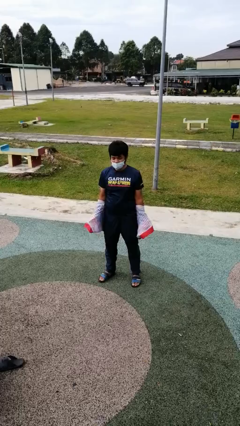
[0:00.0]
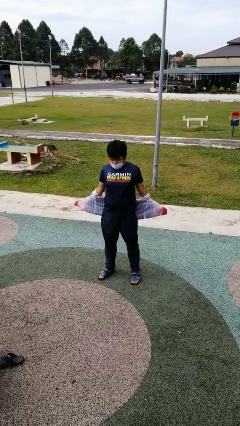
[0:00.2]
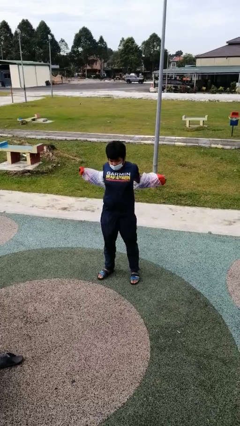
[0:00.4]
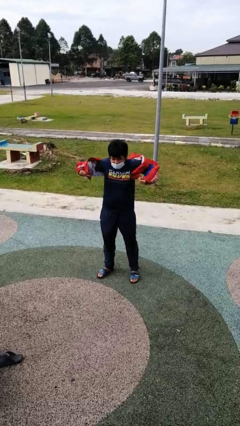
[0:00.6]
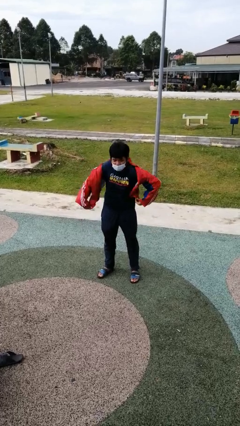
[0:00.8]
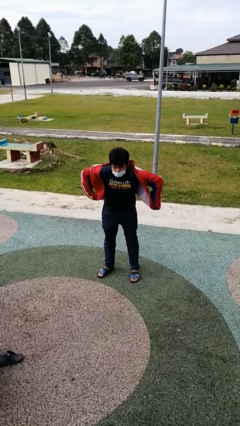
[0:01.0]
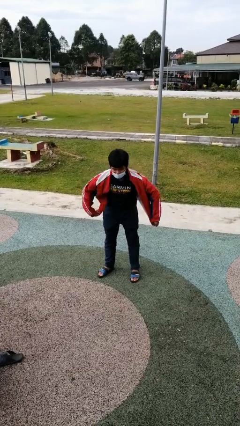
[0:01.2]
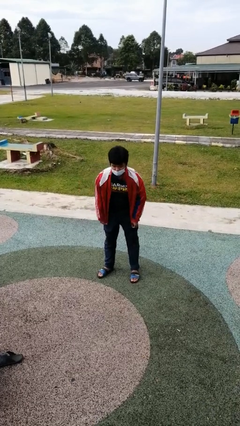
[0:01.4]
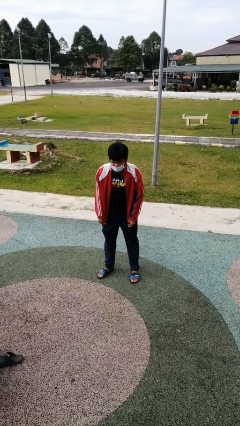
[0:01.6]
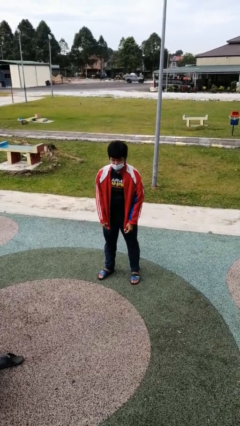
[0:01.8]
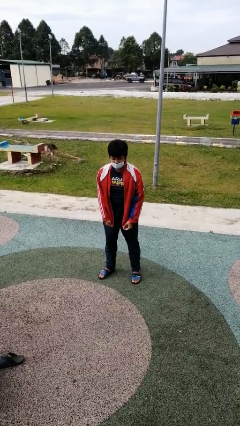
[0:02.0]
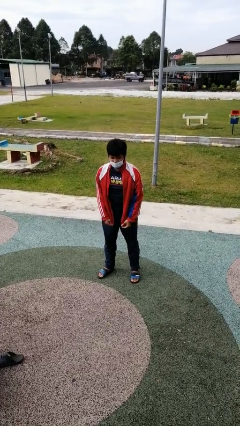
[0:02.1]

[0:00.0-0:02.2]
person puts on jacket

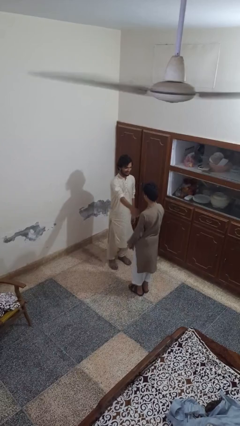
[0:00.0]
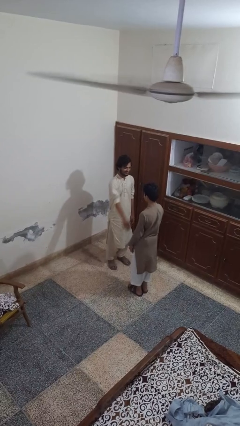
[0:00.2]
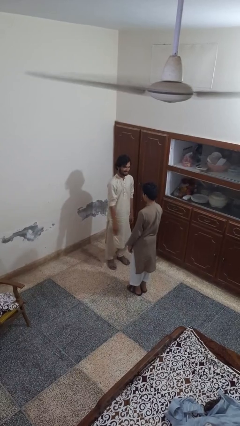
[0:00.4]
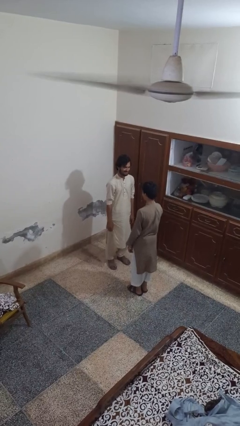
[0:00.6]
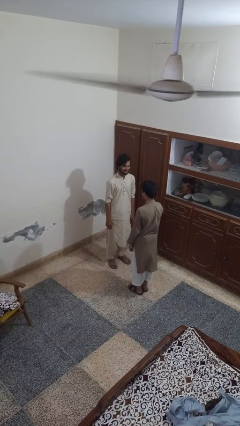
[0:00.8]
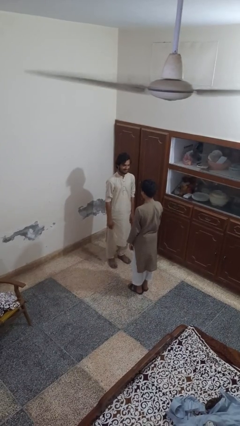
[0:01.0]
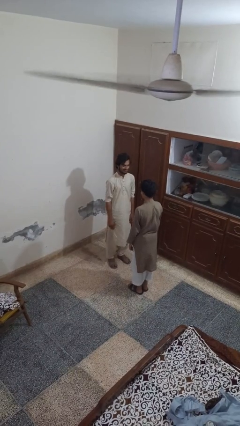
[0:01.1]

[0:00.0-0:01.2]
person shoves person

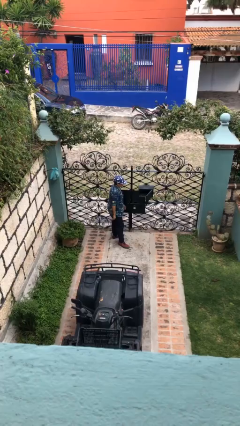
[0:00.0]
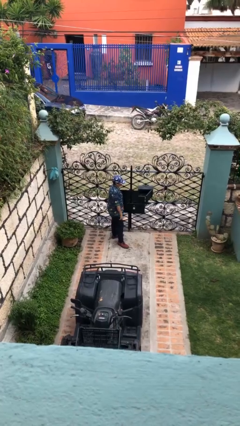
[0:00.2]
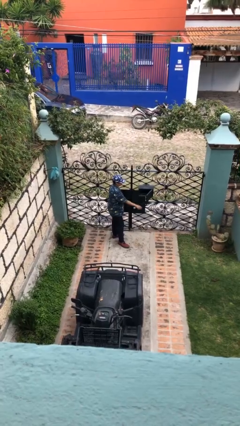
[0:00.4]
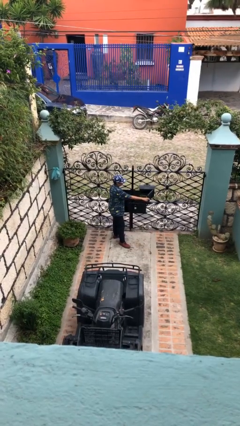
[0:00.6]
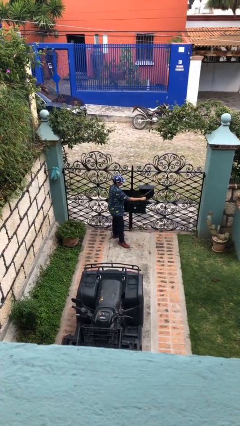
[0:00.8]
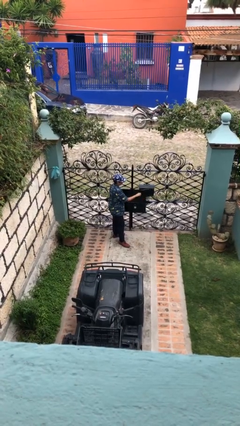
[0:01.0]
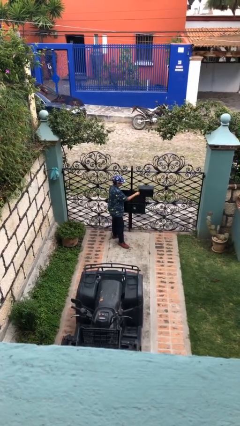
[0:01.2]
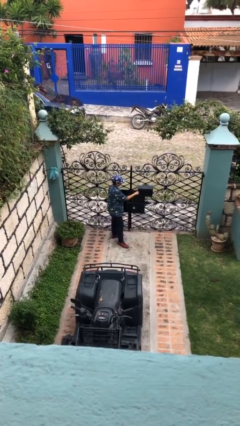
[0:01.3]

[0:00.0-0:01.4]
person closes mailbox

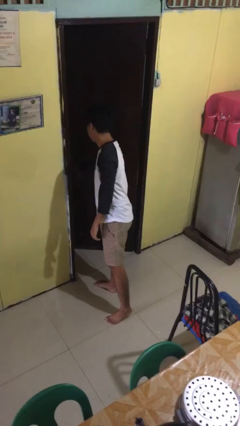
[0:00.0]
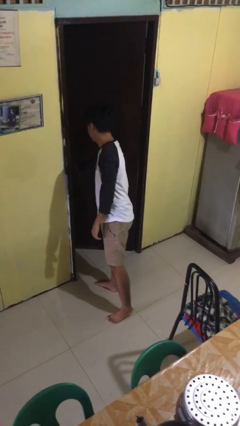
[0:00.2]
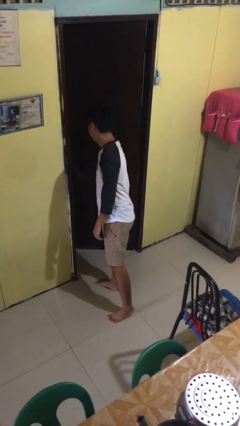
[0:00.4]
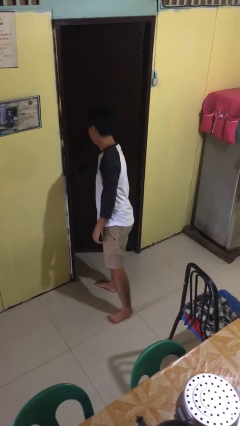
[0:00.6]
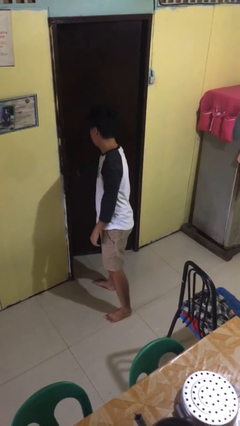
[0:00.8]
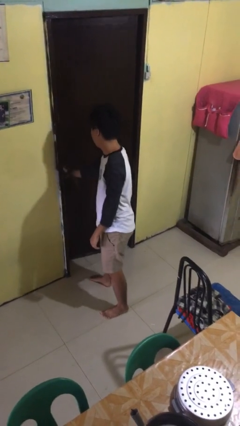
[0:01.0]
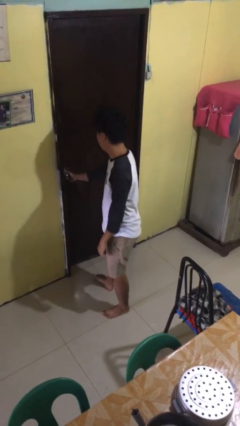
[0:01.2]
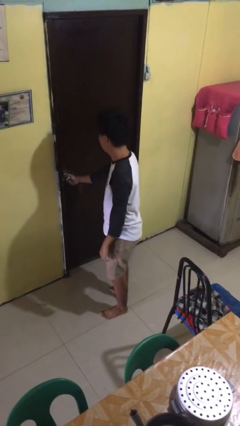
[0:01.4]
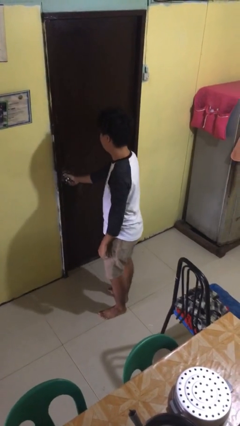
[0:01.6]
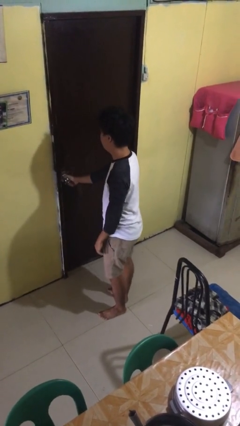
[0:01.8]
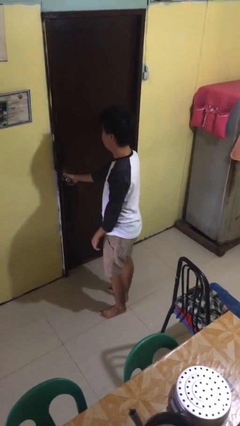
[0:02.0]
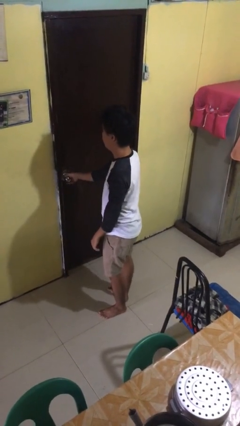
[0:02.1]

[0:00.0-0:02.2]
person closes facility door

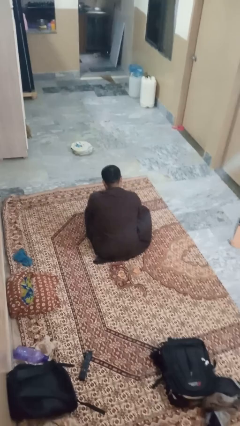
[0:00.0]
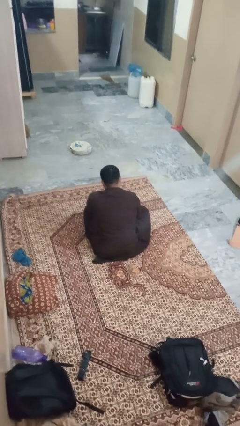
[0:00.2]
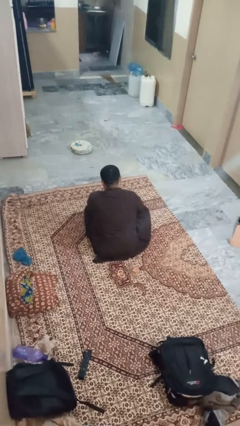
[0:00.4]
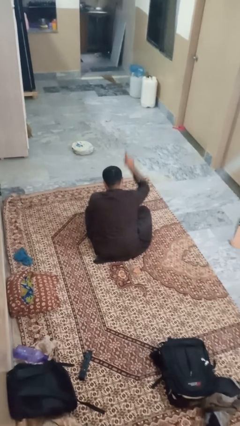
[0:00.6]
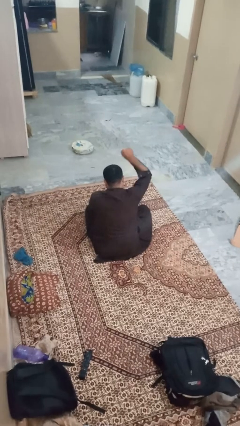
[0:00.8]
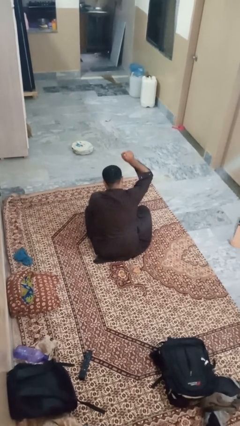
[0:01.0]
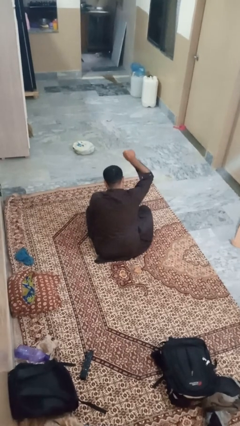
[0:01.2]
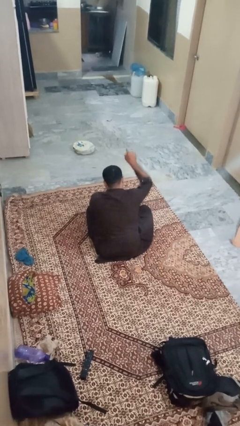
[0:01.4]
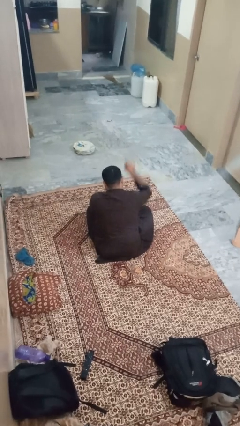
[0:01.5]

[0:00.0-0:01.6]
person gestures number one

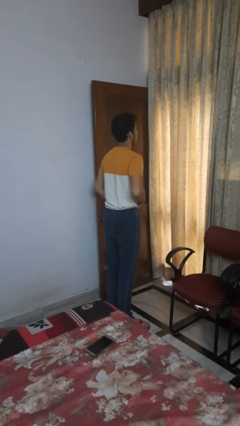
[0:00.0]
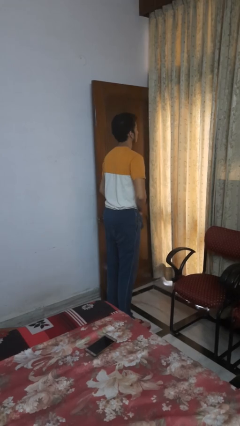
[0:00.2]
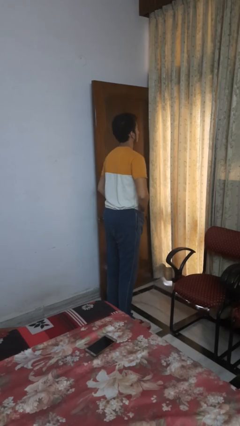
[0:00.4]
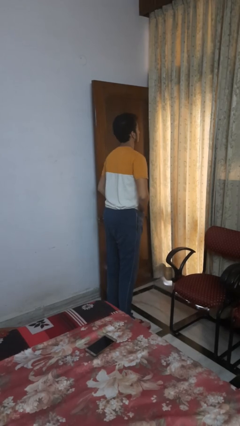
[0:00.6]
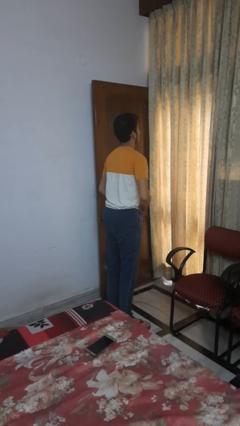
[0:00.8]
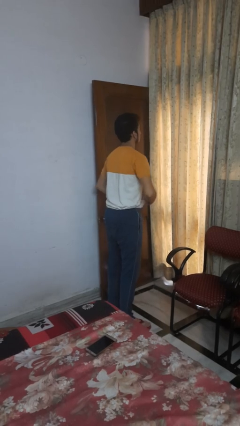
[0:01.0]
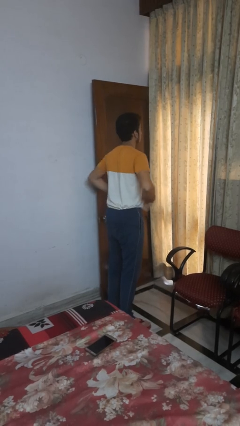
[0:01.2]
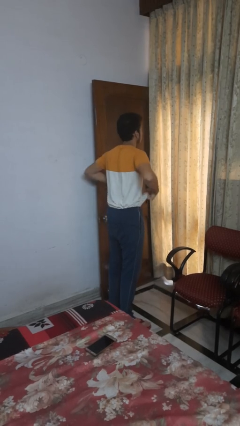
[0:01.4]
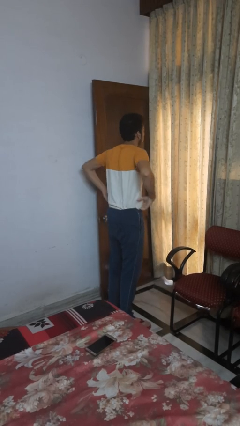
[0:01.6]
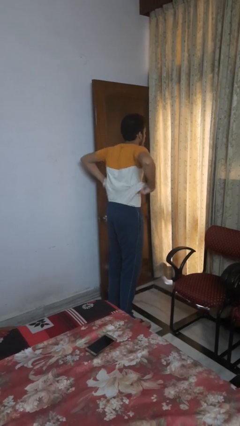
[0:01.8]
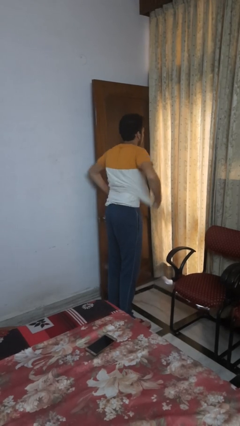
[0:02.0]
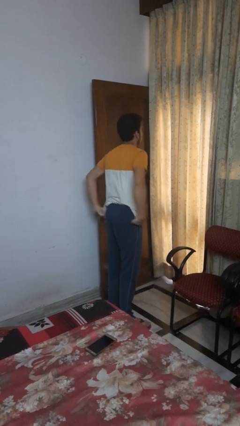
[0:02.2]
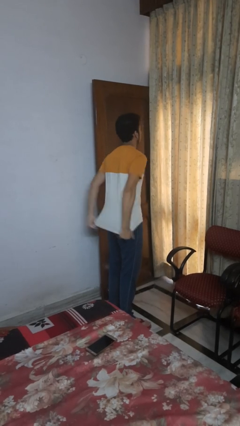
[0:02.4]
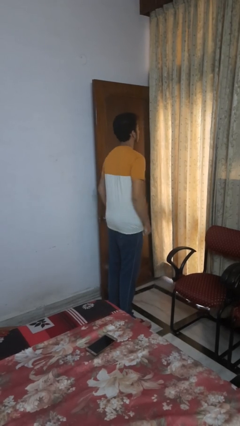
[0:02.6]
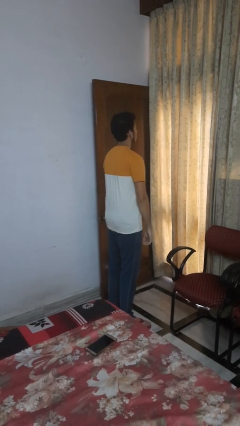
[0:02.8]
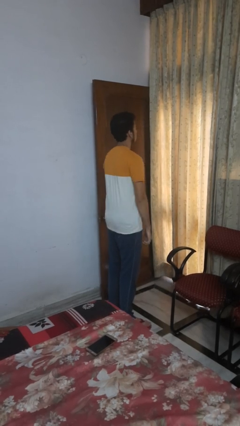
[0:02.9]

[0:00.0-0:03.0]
person untucks shirt

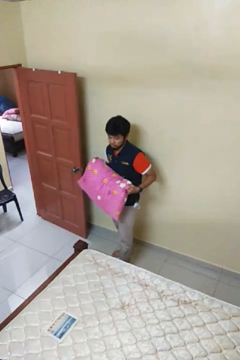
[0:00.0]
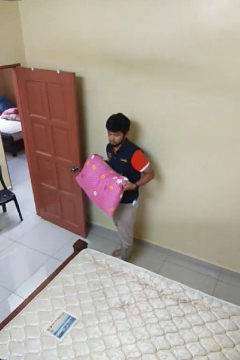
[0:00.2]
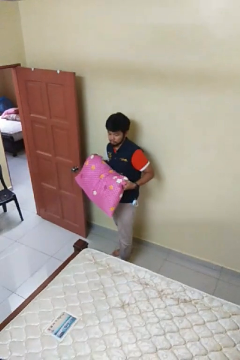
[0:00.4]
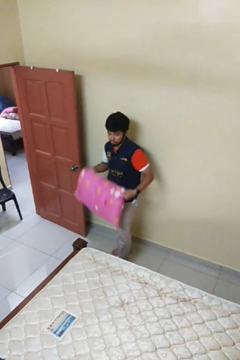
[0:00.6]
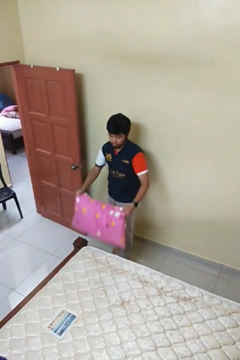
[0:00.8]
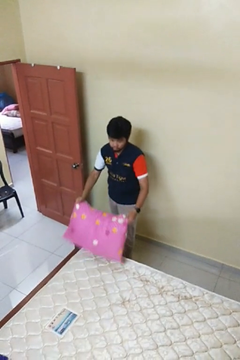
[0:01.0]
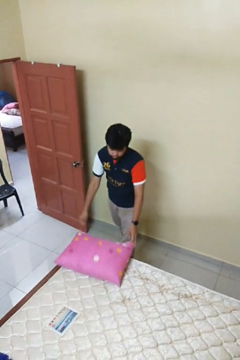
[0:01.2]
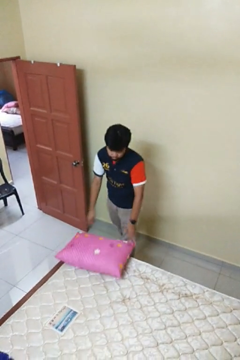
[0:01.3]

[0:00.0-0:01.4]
person puts down object on bed

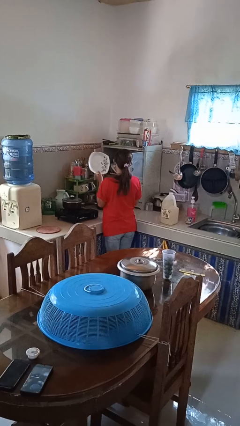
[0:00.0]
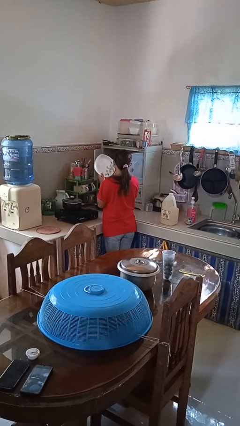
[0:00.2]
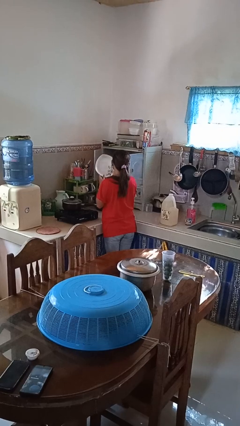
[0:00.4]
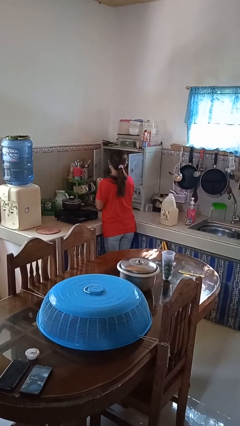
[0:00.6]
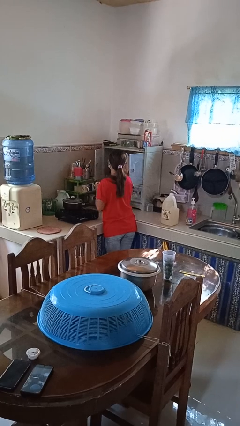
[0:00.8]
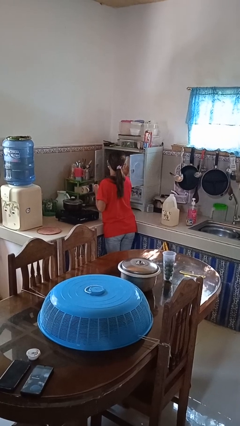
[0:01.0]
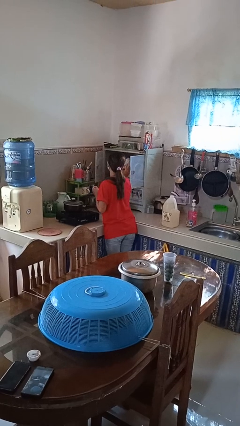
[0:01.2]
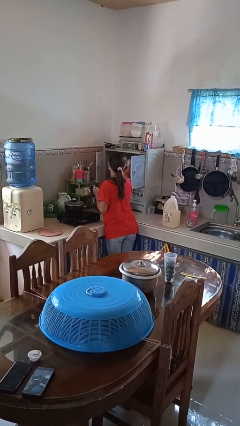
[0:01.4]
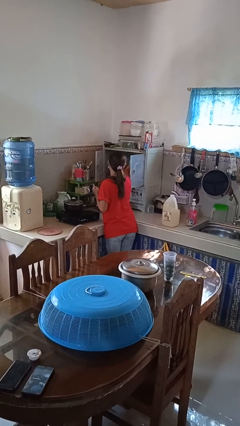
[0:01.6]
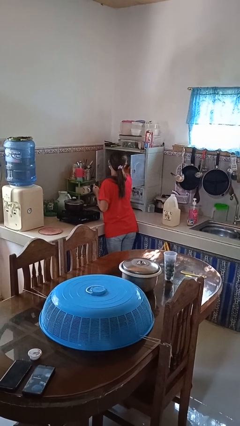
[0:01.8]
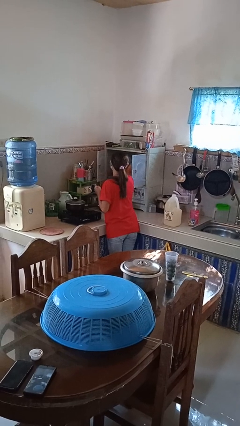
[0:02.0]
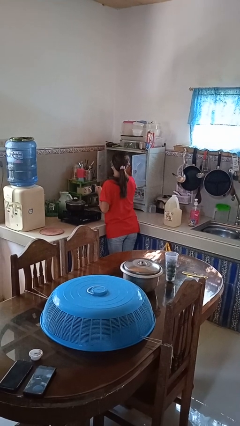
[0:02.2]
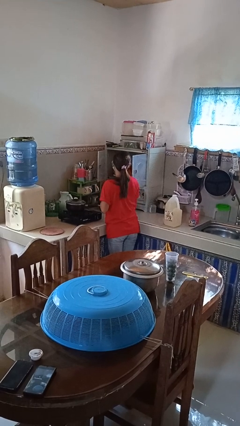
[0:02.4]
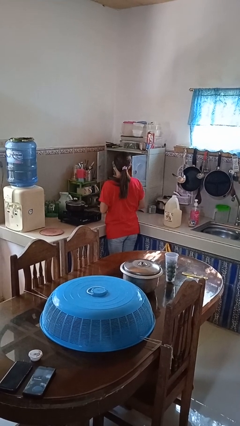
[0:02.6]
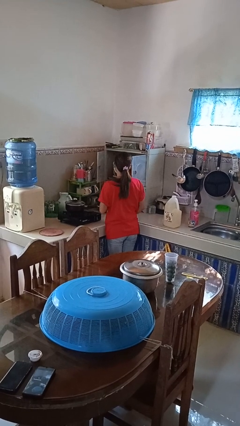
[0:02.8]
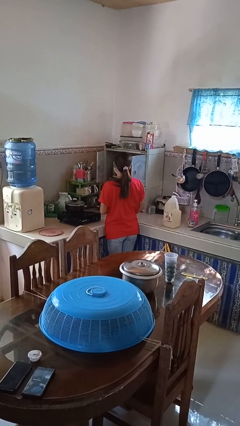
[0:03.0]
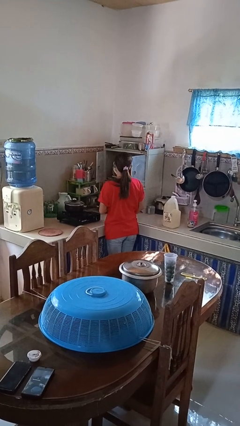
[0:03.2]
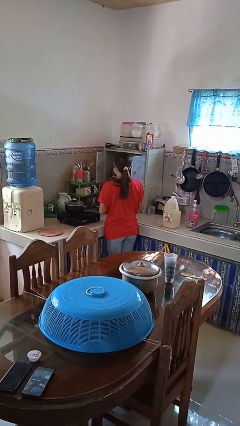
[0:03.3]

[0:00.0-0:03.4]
person puts object in cabinet

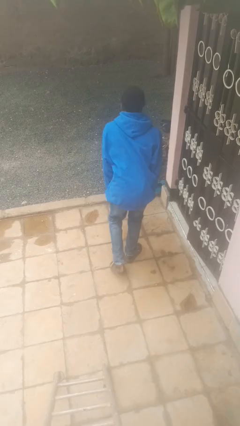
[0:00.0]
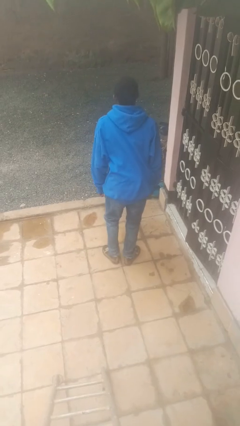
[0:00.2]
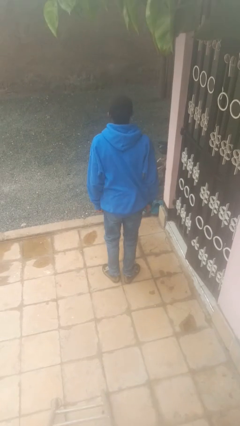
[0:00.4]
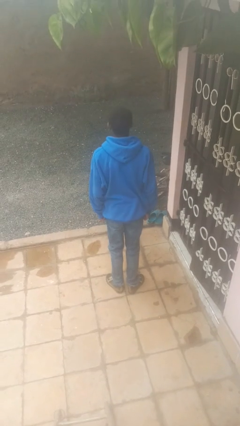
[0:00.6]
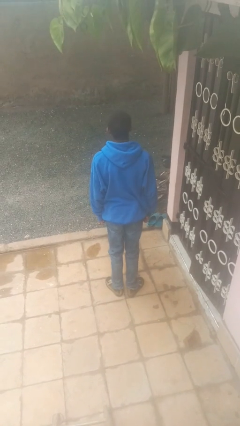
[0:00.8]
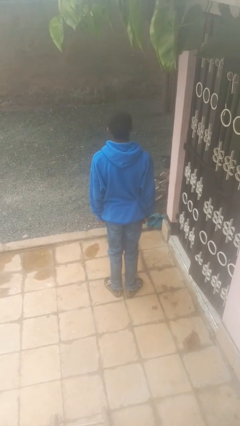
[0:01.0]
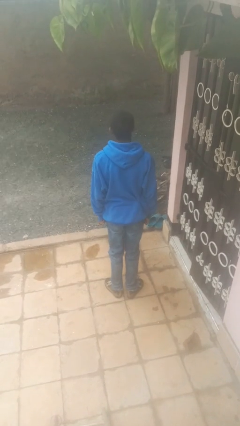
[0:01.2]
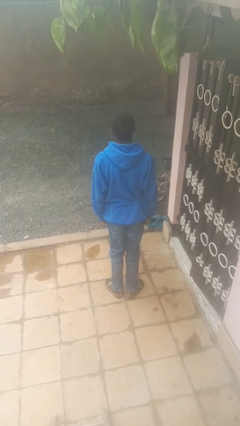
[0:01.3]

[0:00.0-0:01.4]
person stands up from floor
